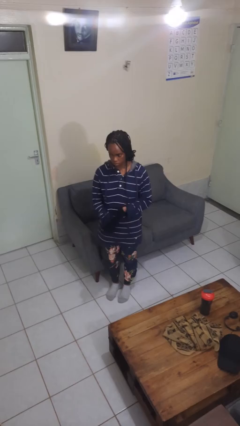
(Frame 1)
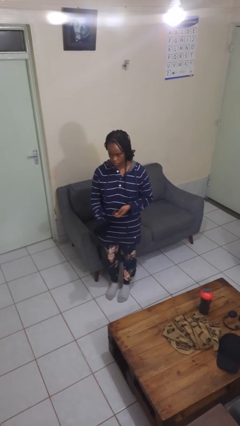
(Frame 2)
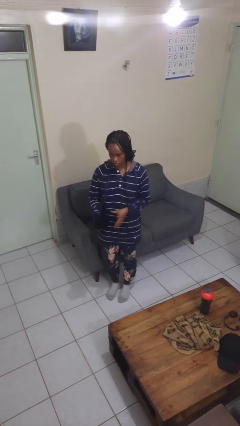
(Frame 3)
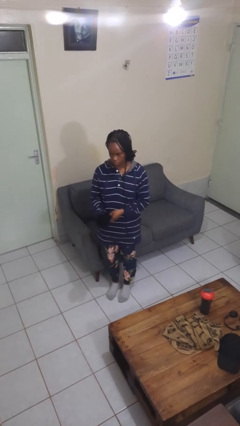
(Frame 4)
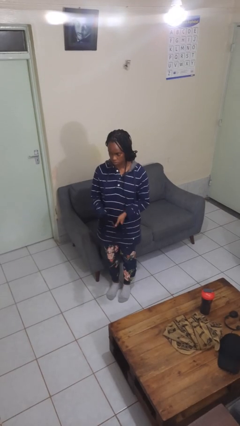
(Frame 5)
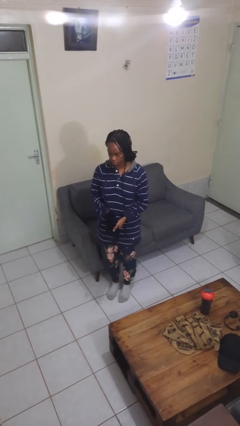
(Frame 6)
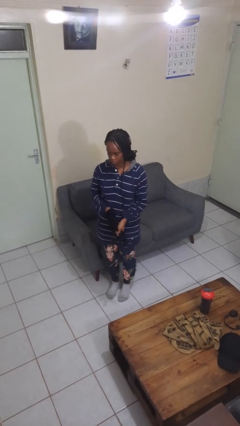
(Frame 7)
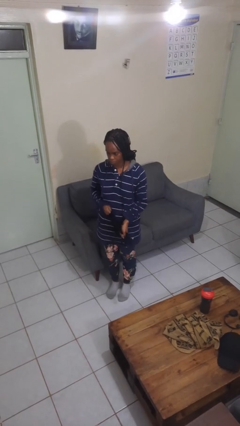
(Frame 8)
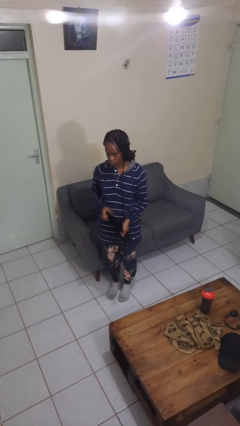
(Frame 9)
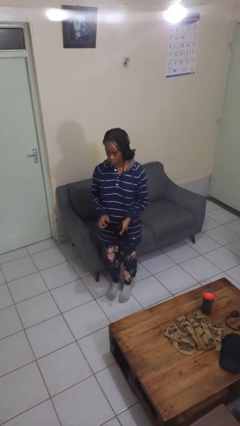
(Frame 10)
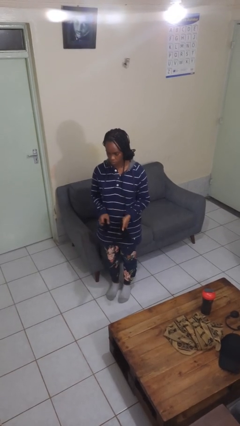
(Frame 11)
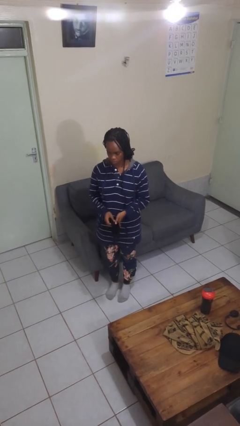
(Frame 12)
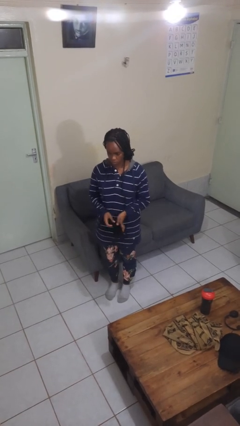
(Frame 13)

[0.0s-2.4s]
person takes off gloves

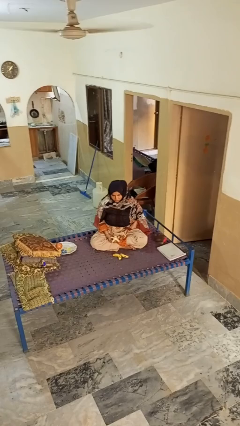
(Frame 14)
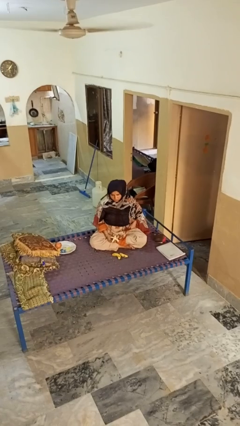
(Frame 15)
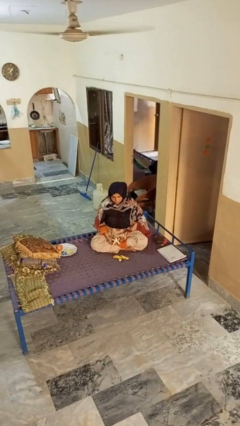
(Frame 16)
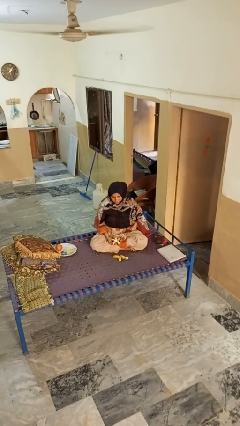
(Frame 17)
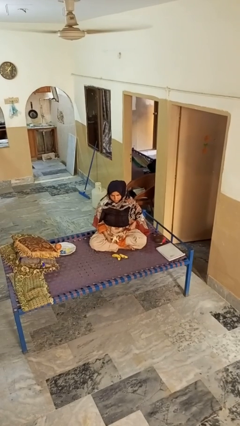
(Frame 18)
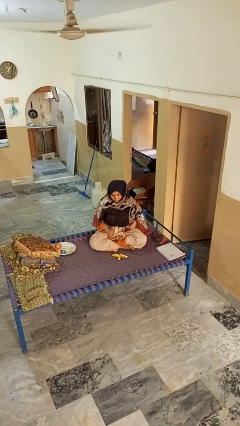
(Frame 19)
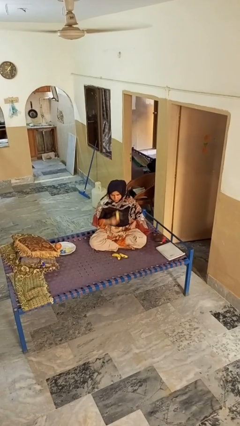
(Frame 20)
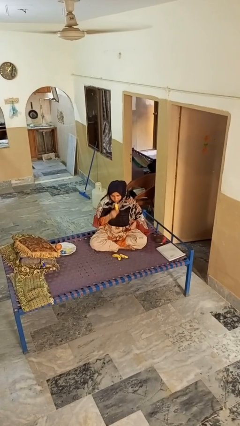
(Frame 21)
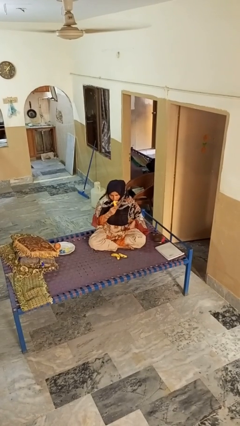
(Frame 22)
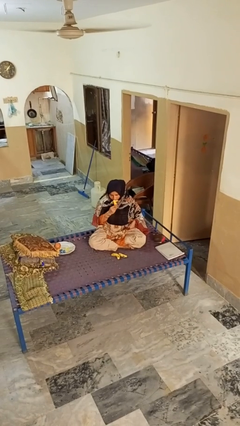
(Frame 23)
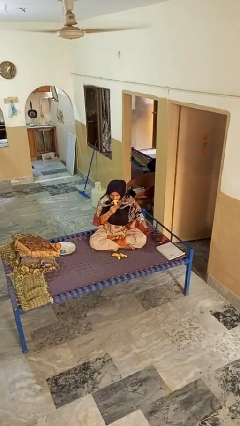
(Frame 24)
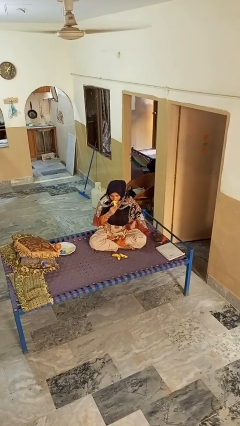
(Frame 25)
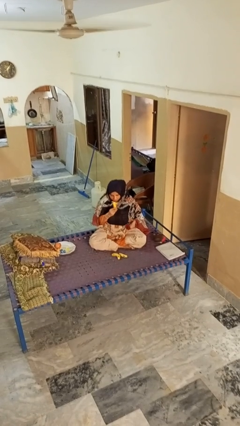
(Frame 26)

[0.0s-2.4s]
person eats banana

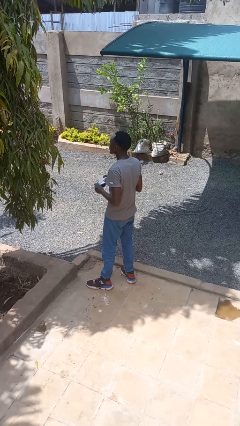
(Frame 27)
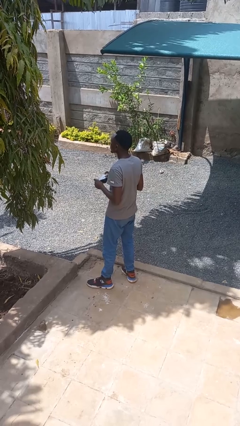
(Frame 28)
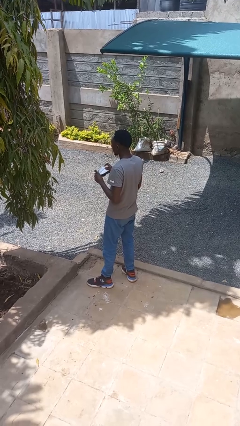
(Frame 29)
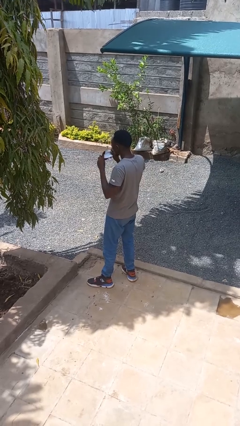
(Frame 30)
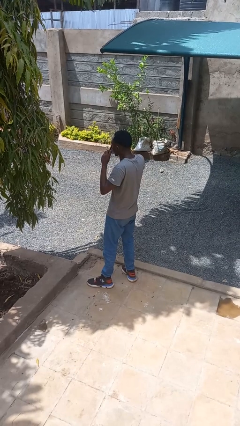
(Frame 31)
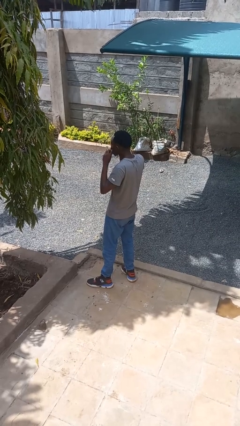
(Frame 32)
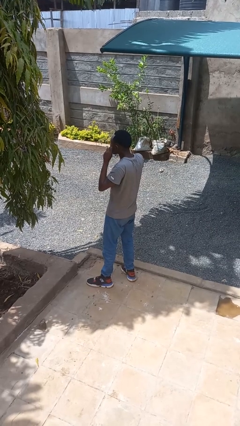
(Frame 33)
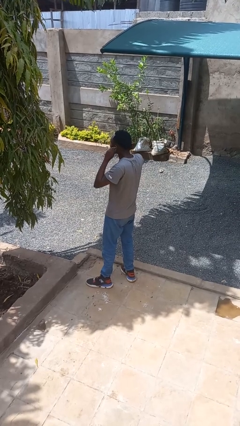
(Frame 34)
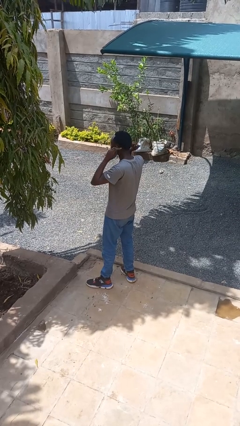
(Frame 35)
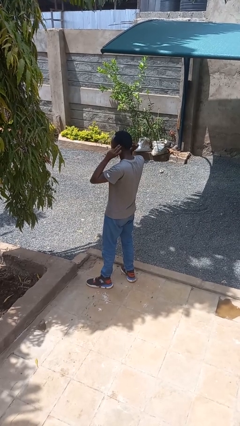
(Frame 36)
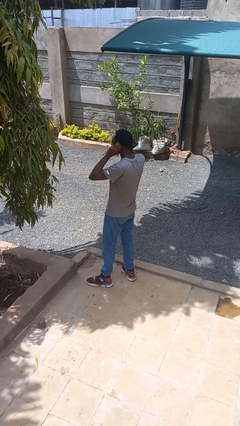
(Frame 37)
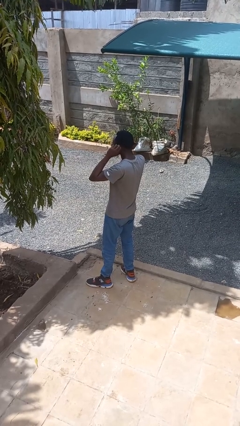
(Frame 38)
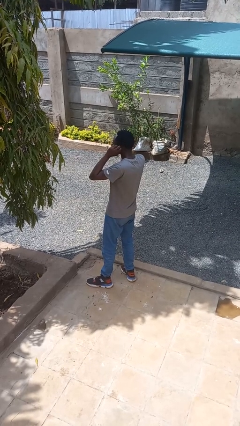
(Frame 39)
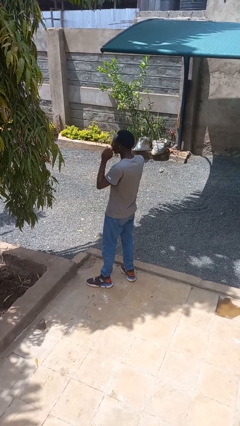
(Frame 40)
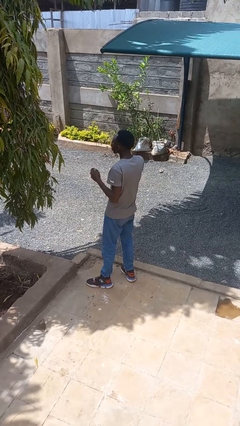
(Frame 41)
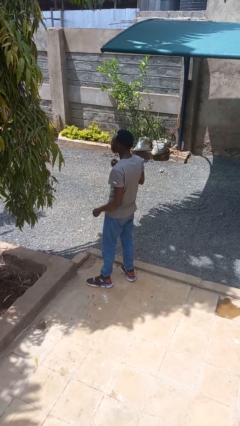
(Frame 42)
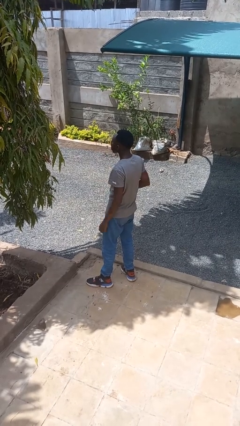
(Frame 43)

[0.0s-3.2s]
person puts on facemask

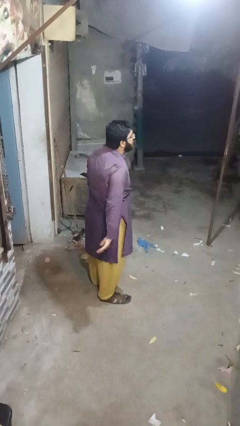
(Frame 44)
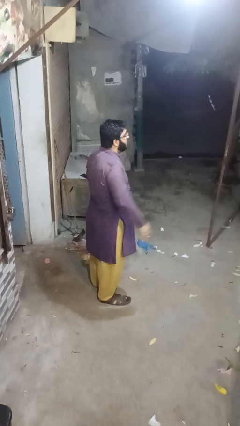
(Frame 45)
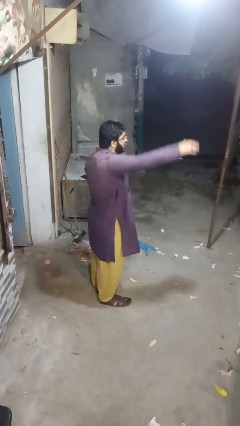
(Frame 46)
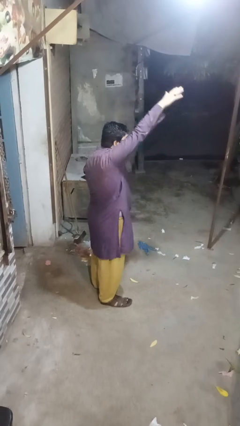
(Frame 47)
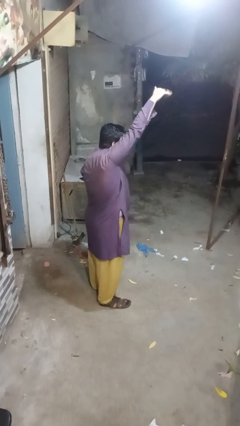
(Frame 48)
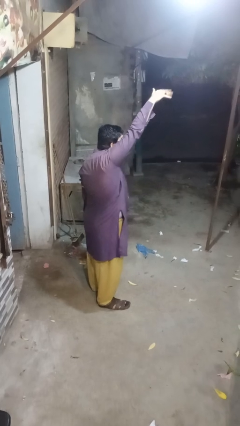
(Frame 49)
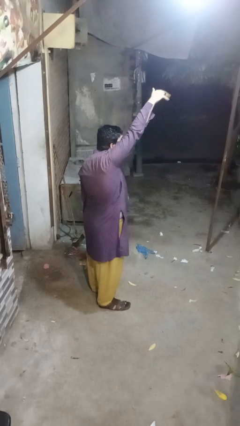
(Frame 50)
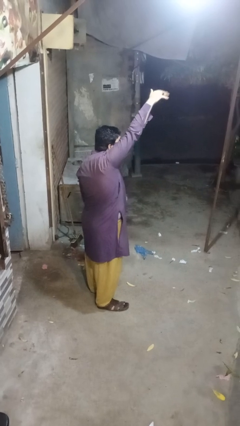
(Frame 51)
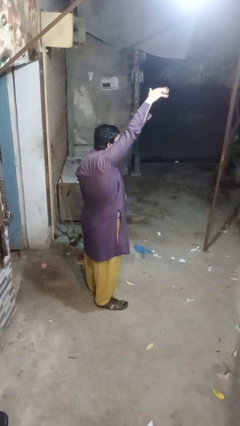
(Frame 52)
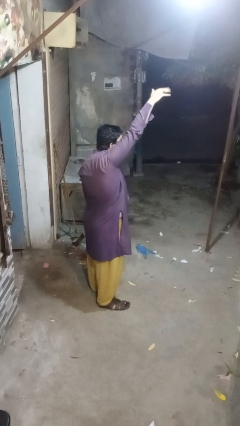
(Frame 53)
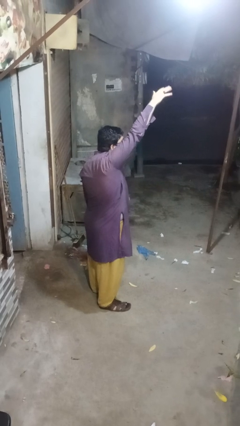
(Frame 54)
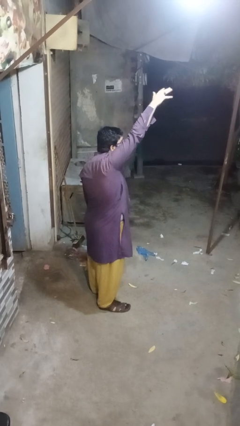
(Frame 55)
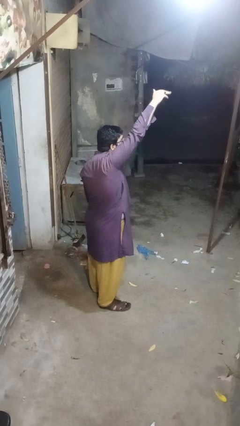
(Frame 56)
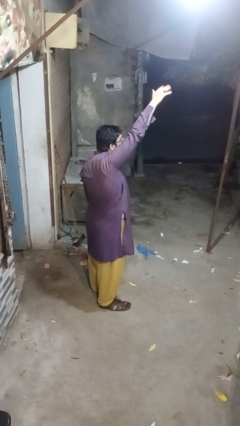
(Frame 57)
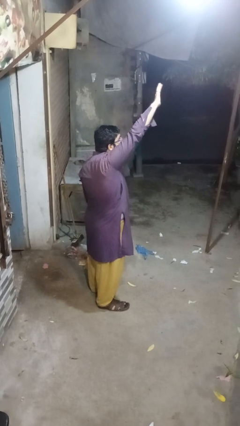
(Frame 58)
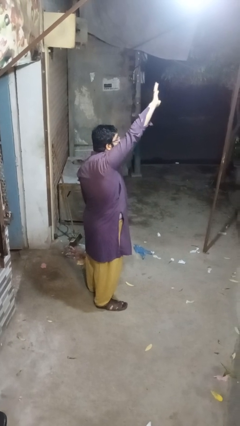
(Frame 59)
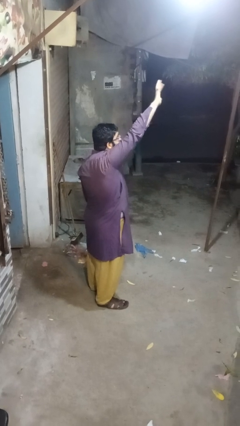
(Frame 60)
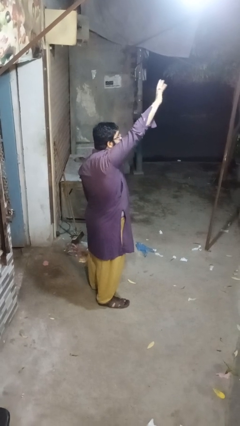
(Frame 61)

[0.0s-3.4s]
person gestures raise hand

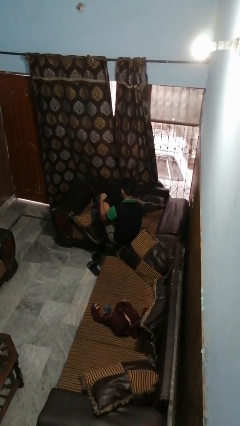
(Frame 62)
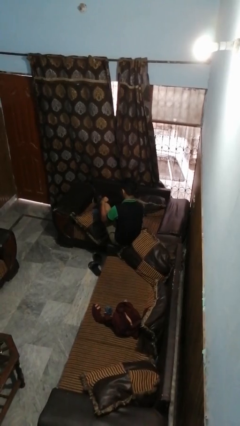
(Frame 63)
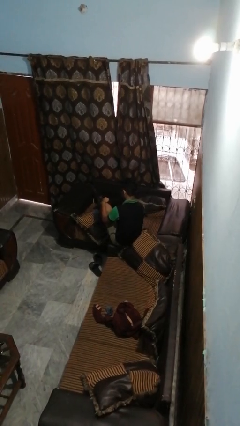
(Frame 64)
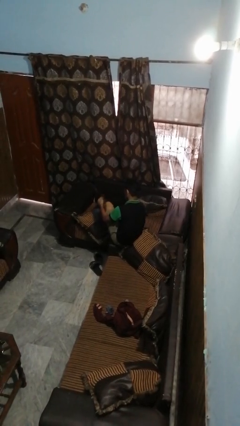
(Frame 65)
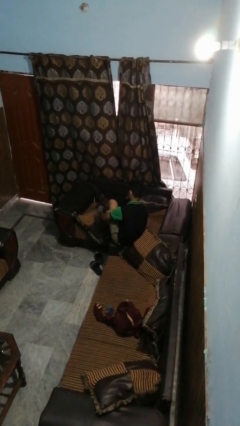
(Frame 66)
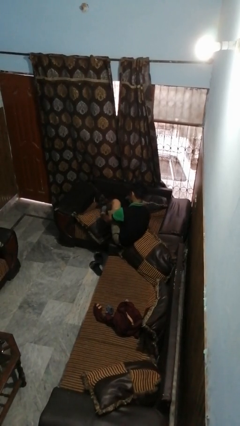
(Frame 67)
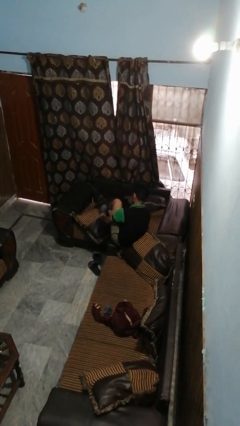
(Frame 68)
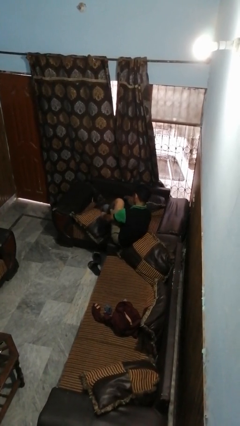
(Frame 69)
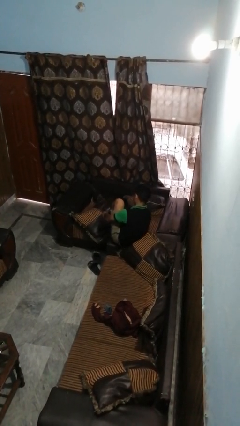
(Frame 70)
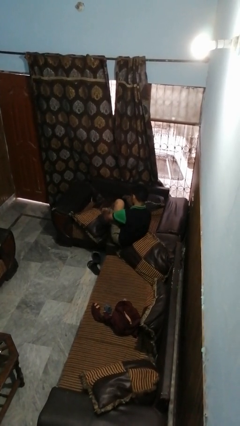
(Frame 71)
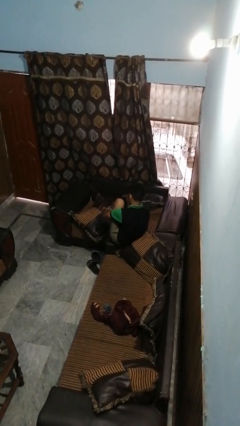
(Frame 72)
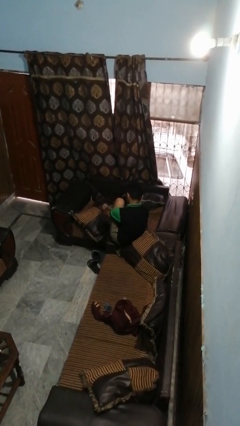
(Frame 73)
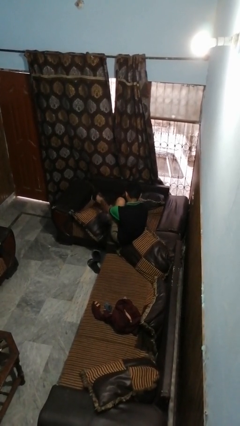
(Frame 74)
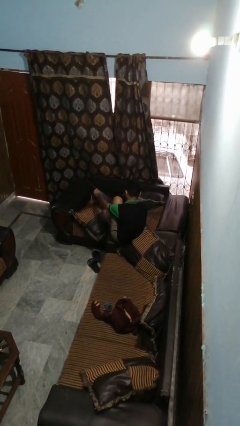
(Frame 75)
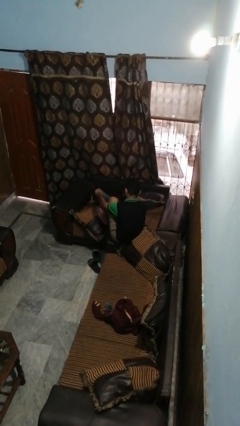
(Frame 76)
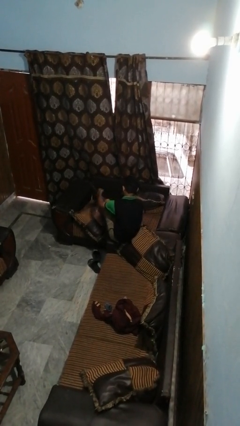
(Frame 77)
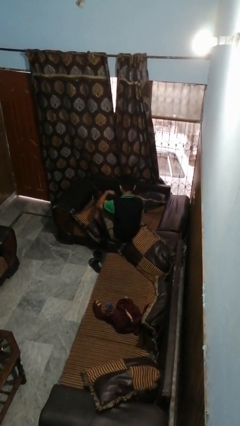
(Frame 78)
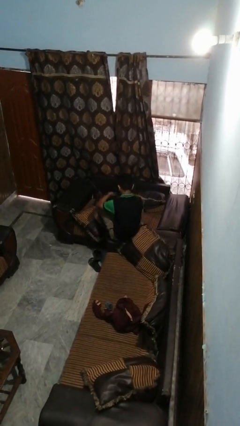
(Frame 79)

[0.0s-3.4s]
person takes off socks

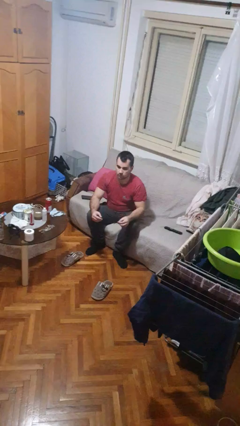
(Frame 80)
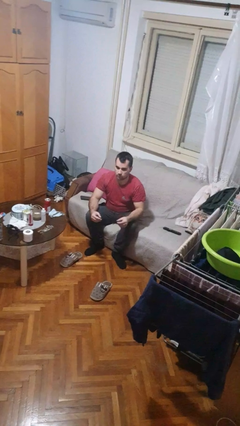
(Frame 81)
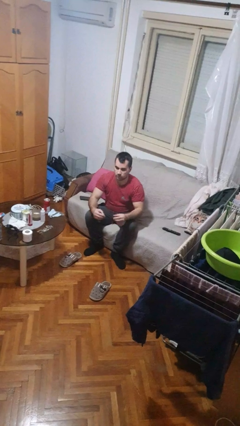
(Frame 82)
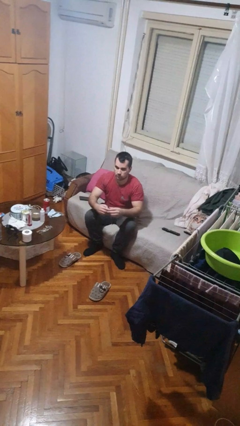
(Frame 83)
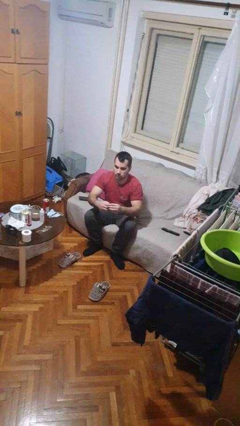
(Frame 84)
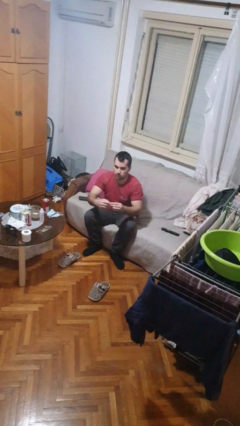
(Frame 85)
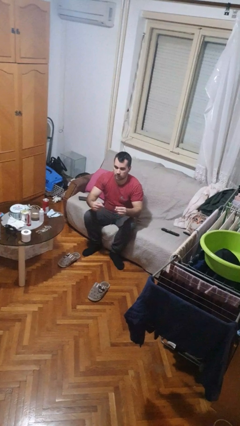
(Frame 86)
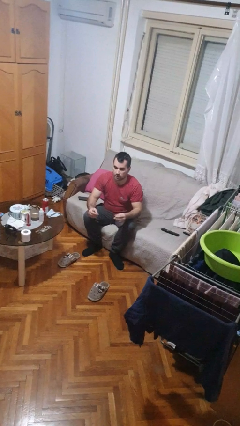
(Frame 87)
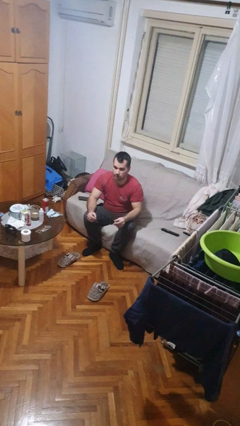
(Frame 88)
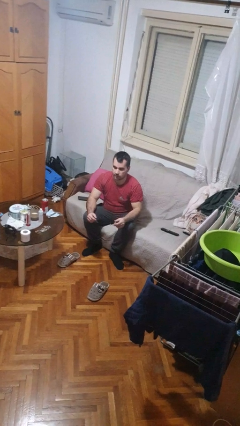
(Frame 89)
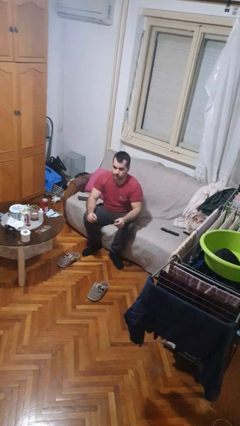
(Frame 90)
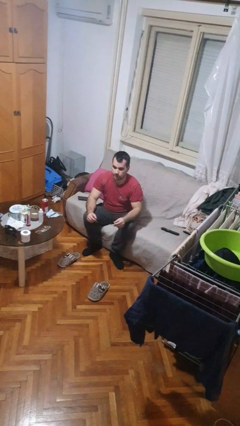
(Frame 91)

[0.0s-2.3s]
person takes off ring

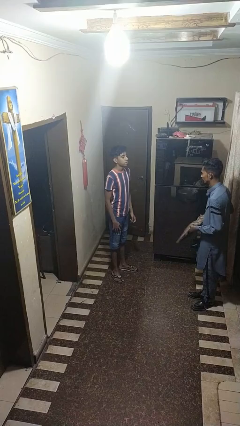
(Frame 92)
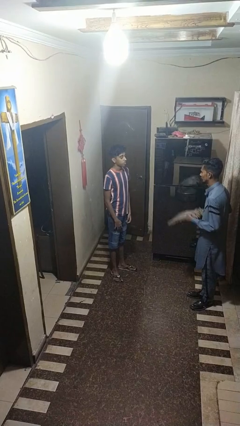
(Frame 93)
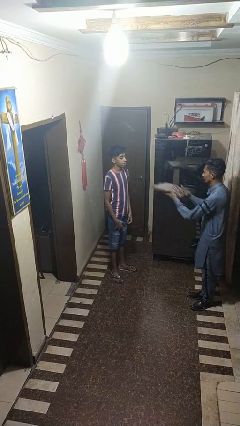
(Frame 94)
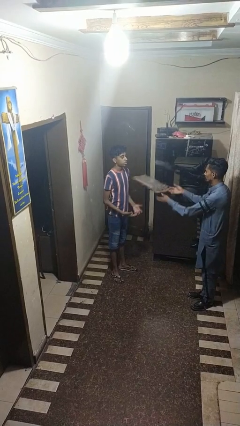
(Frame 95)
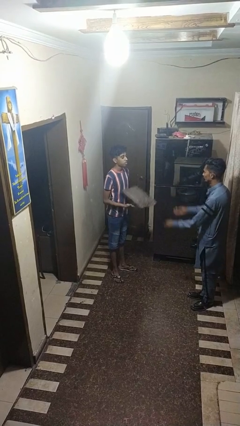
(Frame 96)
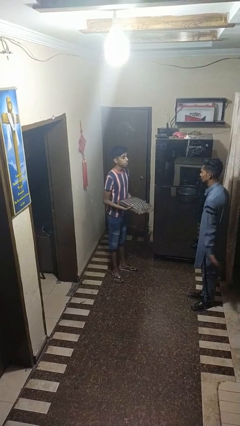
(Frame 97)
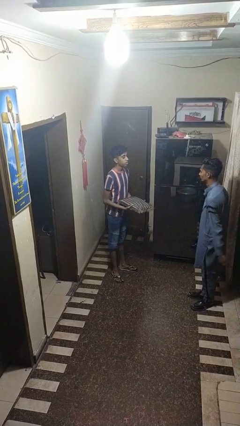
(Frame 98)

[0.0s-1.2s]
person catches object from person
